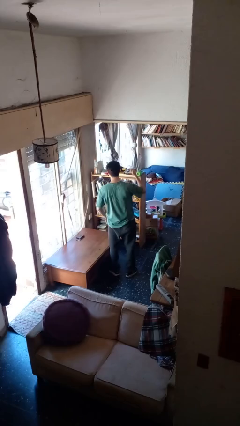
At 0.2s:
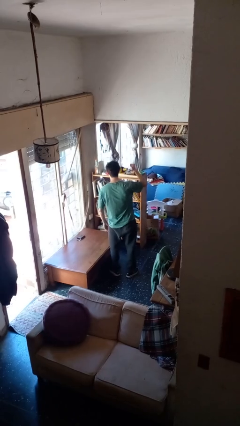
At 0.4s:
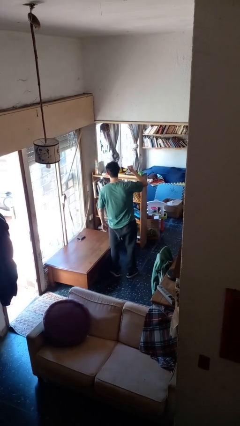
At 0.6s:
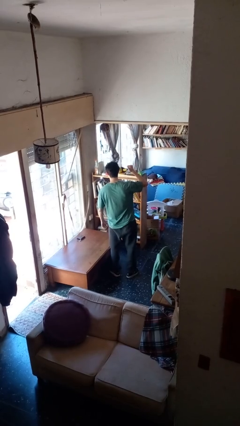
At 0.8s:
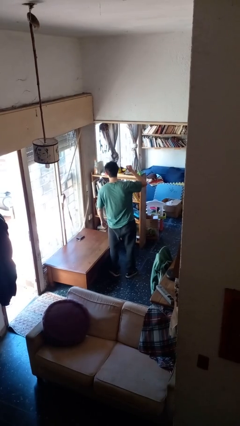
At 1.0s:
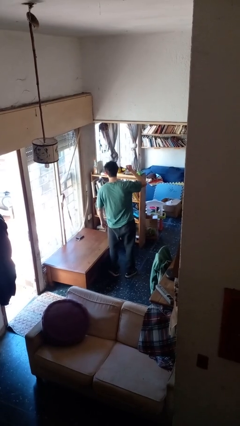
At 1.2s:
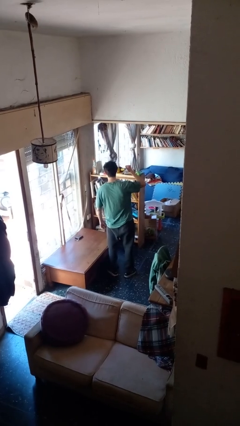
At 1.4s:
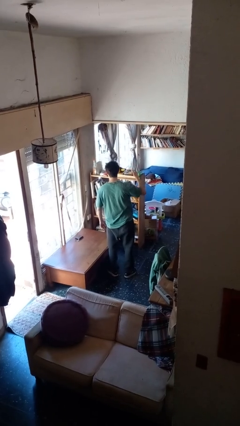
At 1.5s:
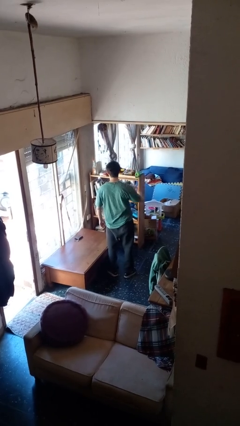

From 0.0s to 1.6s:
person gestures behind me

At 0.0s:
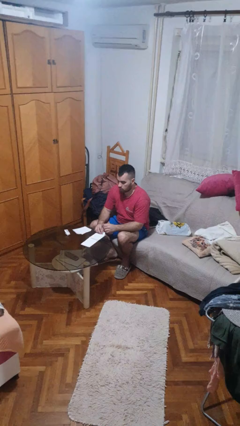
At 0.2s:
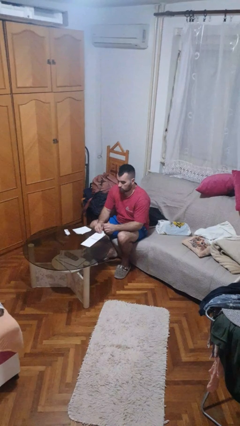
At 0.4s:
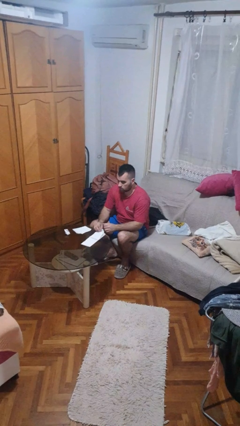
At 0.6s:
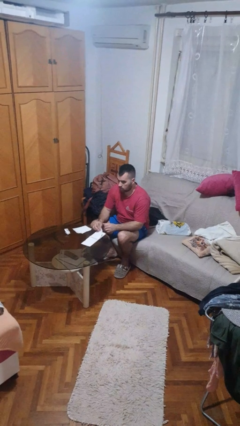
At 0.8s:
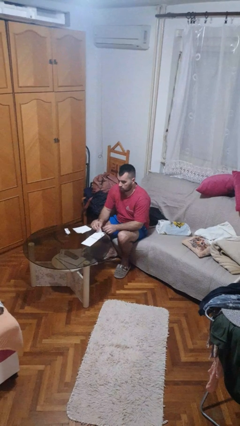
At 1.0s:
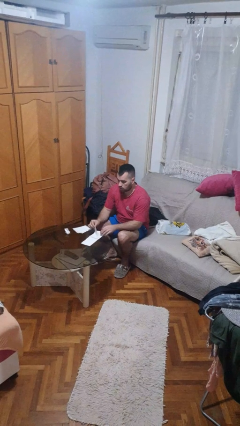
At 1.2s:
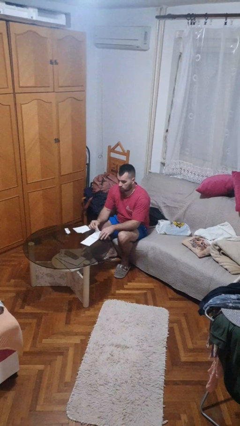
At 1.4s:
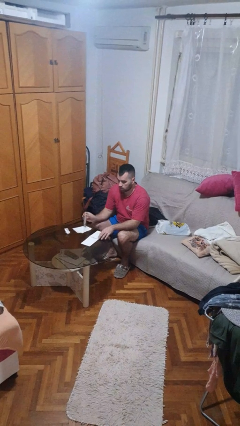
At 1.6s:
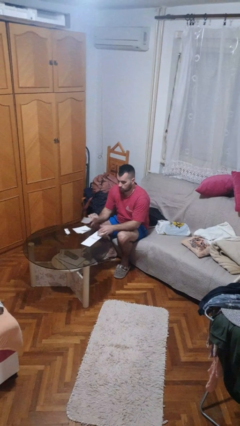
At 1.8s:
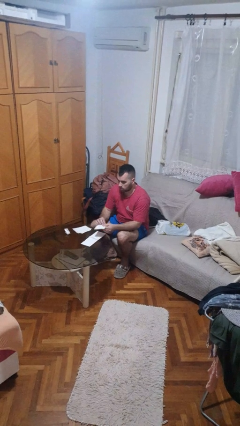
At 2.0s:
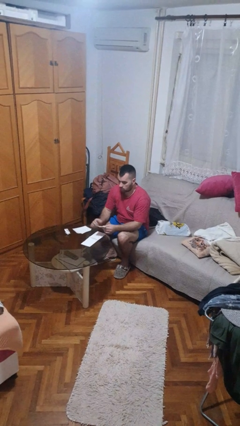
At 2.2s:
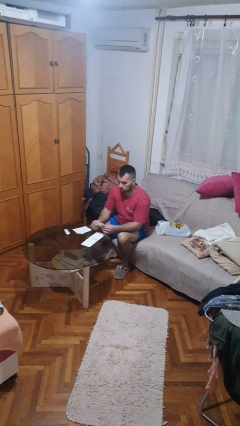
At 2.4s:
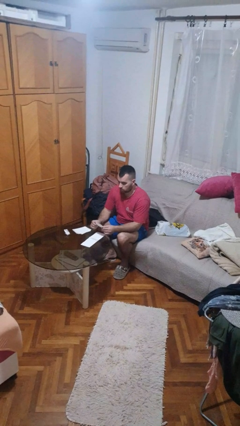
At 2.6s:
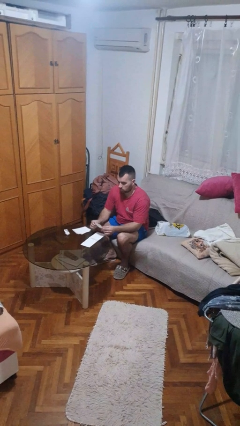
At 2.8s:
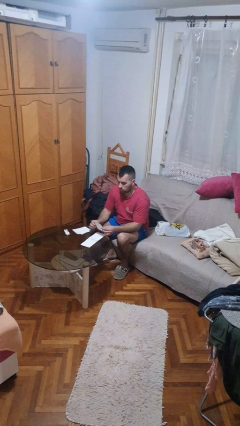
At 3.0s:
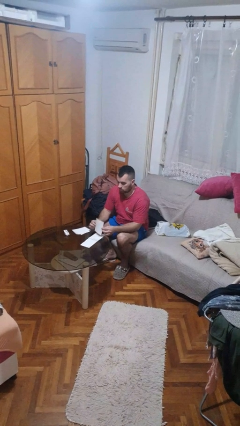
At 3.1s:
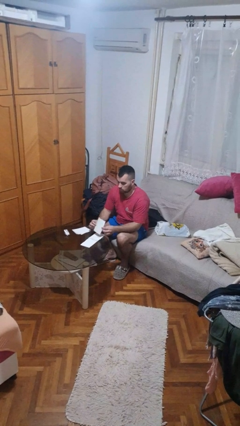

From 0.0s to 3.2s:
person tears paper

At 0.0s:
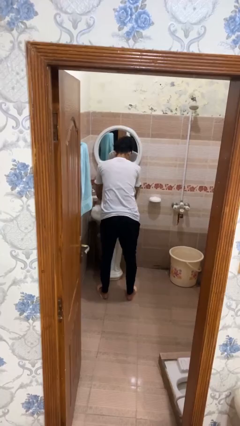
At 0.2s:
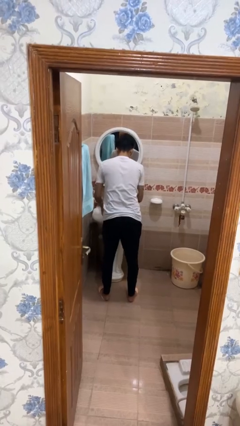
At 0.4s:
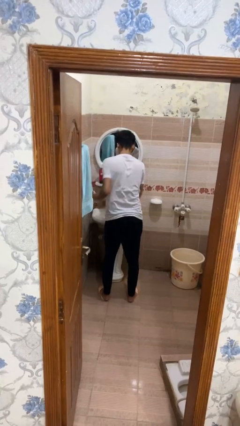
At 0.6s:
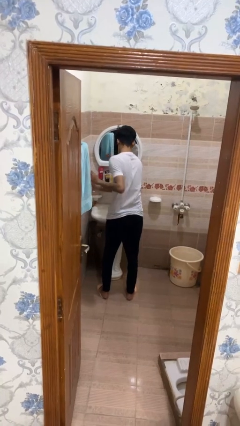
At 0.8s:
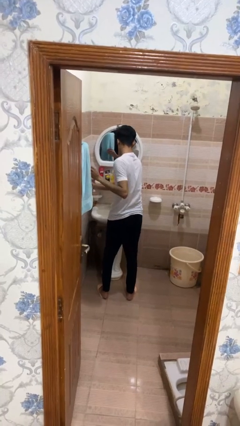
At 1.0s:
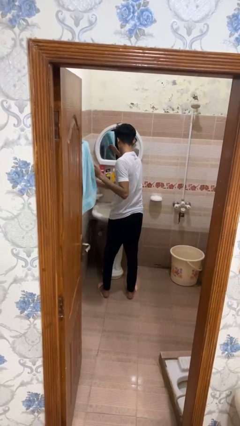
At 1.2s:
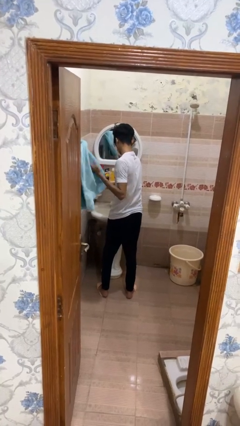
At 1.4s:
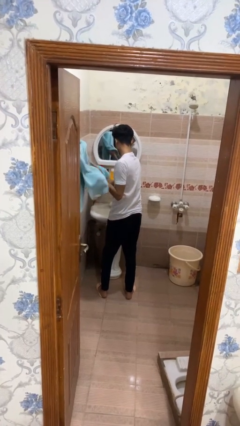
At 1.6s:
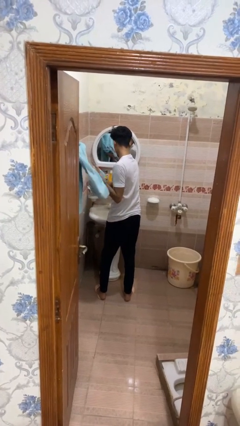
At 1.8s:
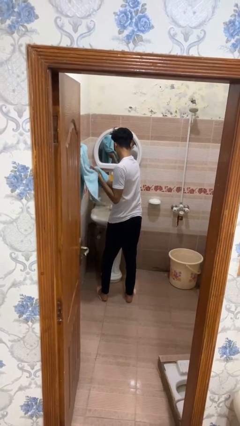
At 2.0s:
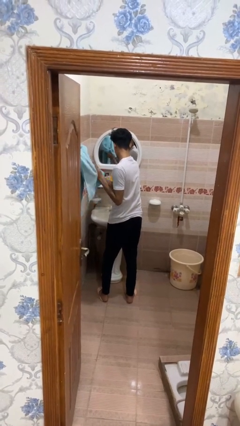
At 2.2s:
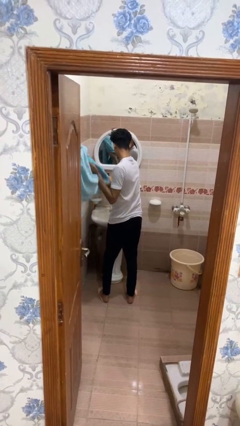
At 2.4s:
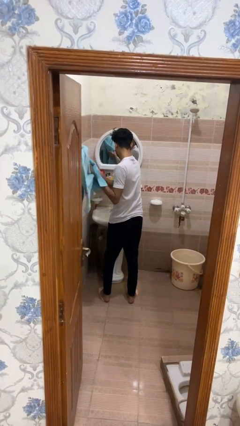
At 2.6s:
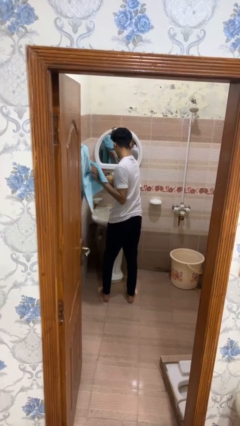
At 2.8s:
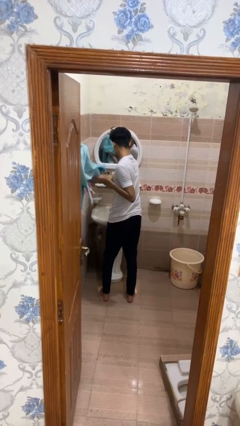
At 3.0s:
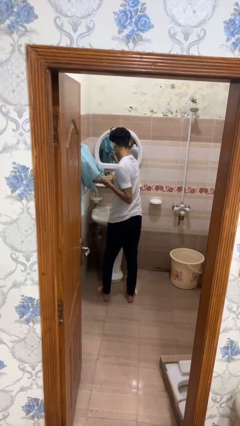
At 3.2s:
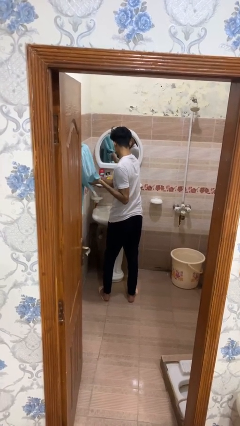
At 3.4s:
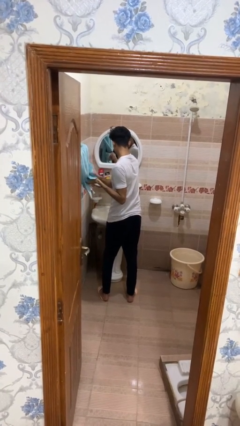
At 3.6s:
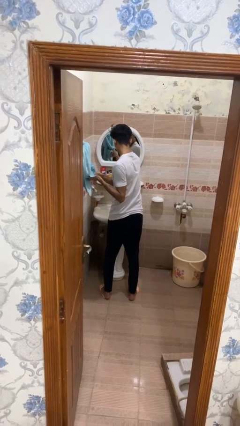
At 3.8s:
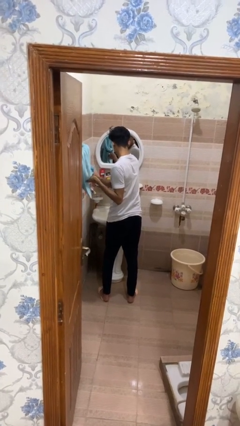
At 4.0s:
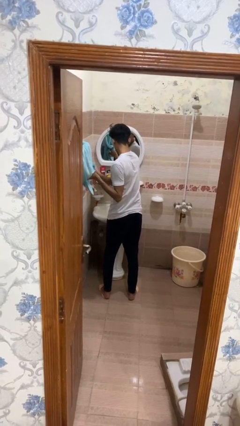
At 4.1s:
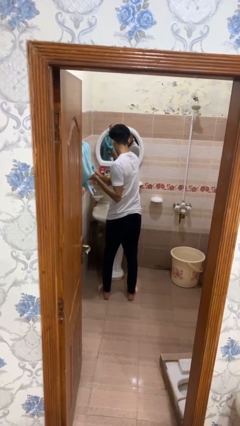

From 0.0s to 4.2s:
person dries hands with towel

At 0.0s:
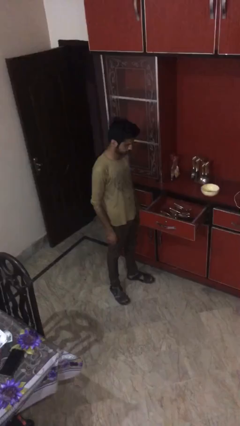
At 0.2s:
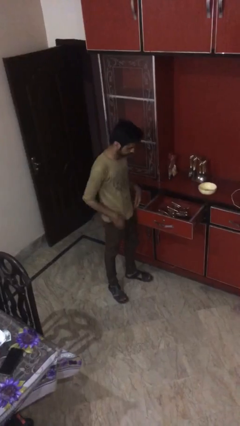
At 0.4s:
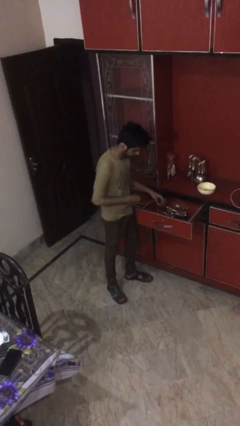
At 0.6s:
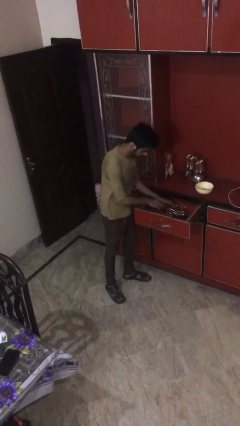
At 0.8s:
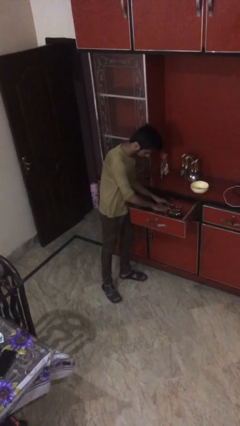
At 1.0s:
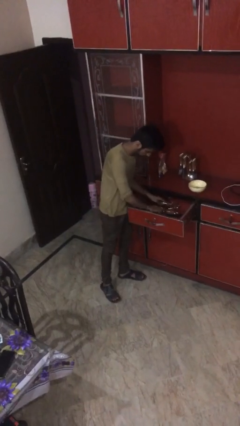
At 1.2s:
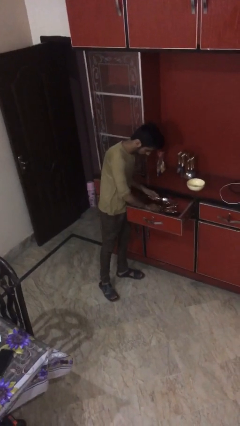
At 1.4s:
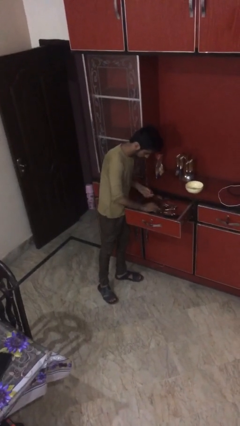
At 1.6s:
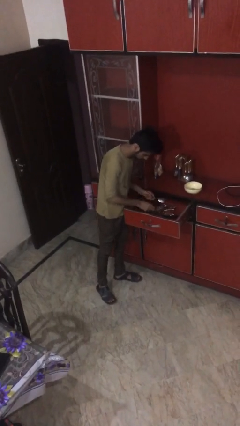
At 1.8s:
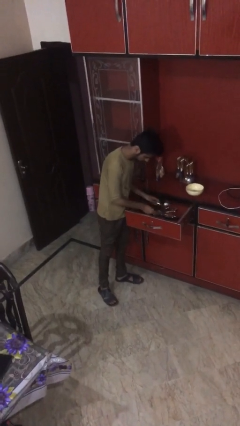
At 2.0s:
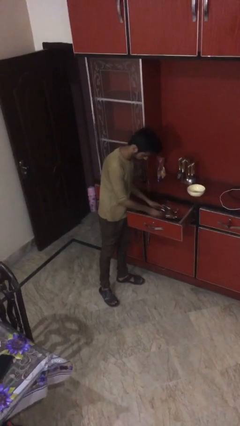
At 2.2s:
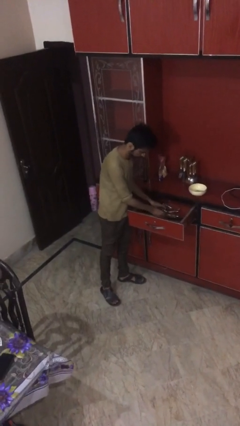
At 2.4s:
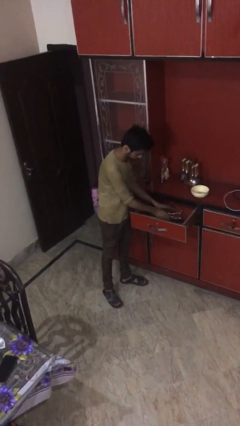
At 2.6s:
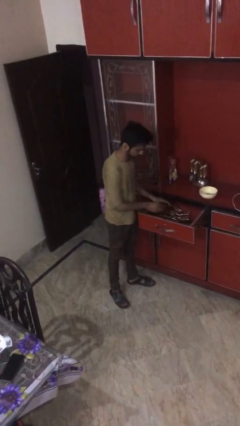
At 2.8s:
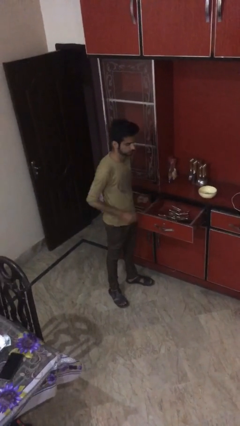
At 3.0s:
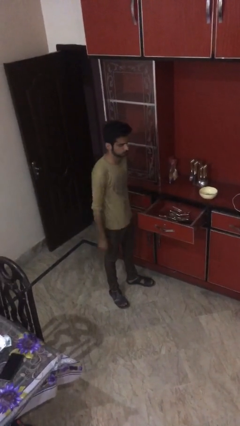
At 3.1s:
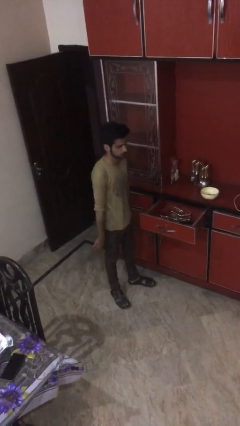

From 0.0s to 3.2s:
person searches in kitchen drawer

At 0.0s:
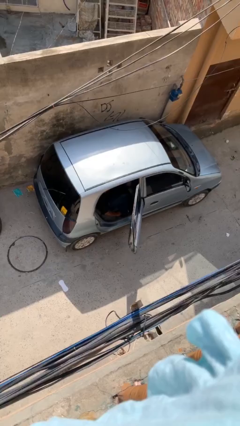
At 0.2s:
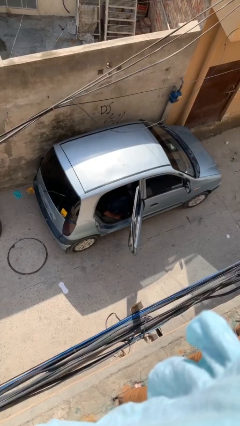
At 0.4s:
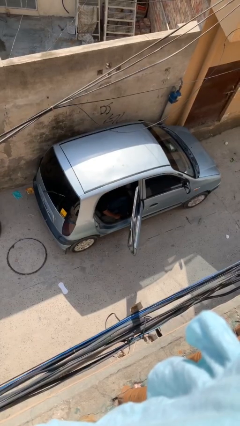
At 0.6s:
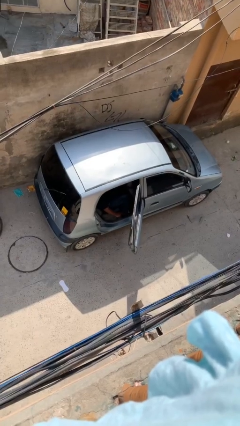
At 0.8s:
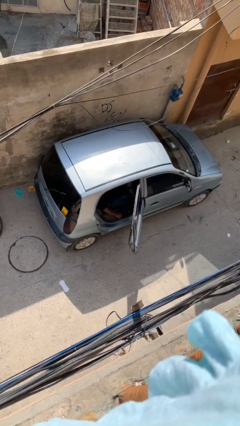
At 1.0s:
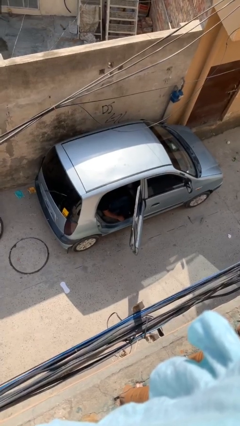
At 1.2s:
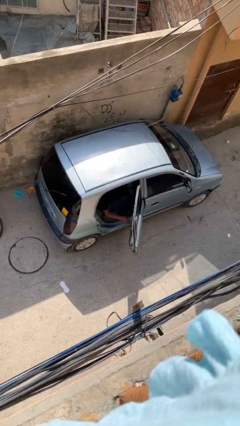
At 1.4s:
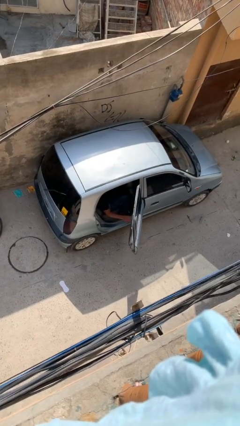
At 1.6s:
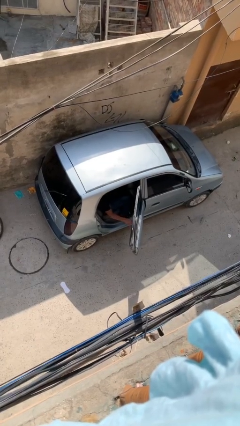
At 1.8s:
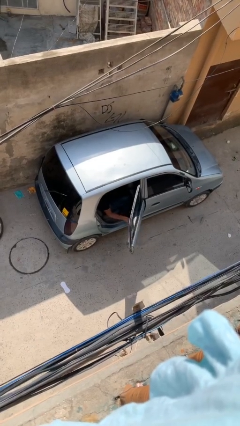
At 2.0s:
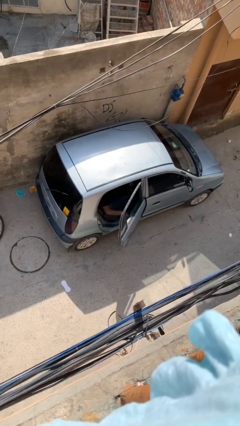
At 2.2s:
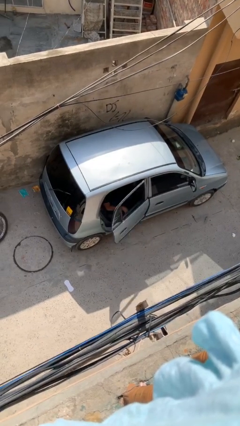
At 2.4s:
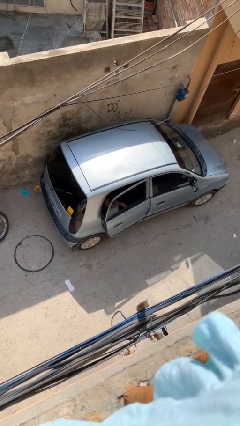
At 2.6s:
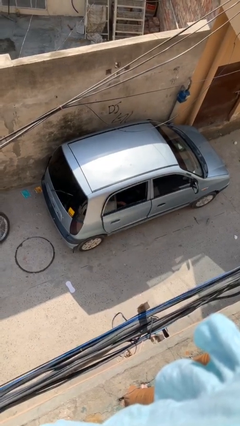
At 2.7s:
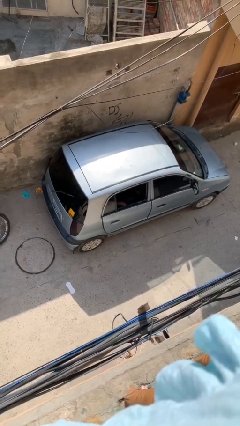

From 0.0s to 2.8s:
person closes car door

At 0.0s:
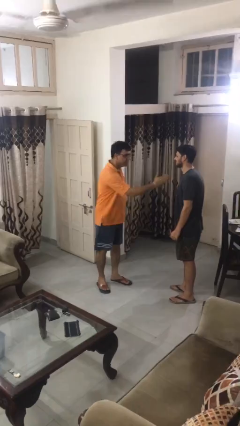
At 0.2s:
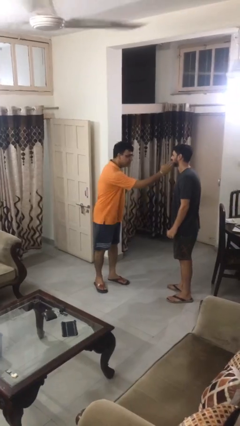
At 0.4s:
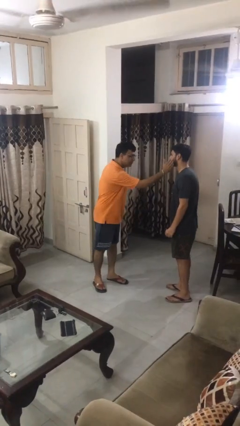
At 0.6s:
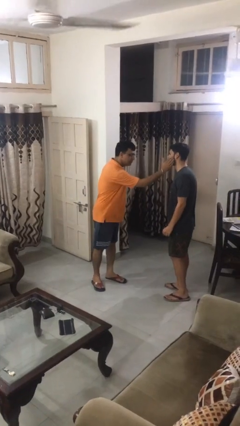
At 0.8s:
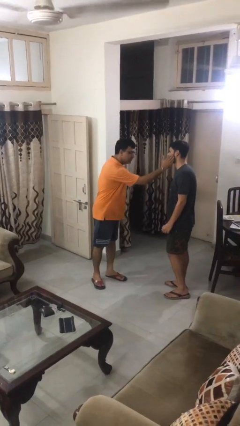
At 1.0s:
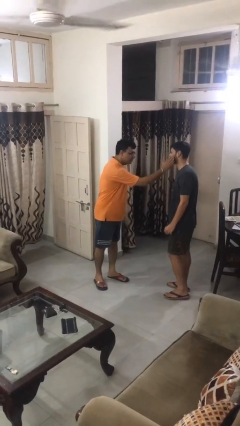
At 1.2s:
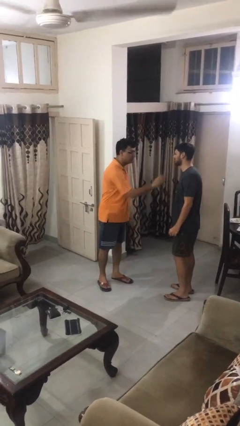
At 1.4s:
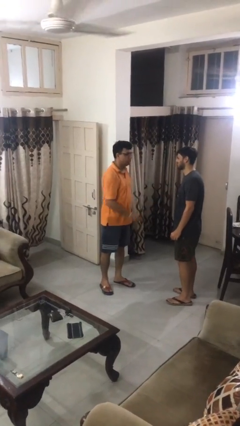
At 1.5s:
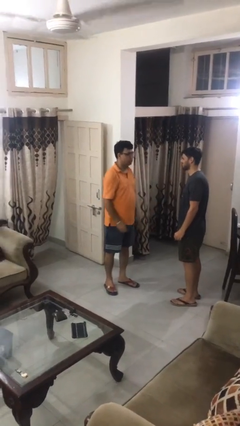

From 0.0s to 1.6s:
person touches face of person

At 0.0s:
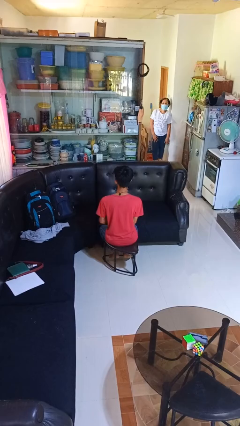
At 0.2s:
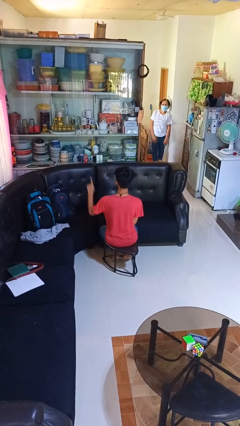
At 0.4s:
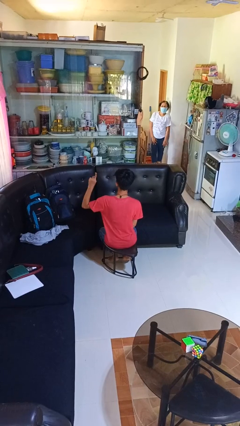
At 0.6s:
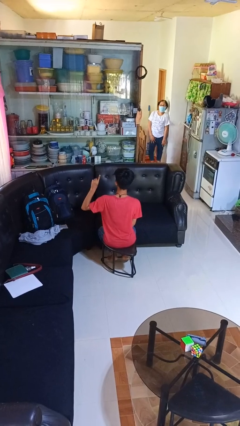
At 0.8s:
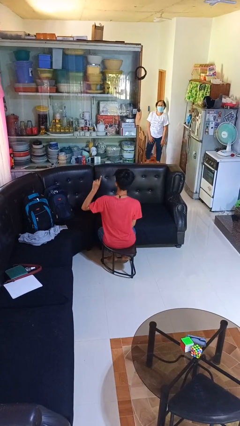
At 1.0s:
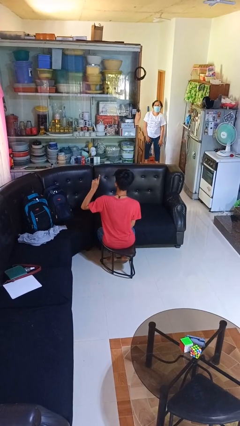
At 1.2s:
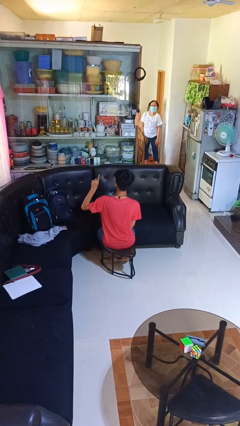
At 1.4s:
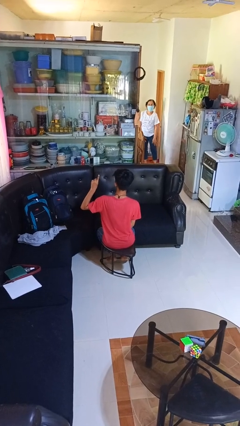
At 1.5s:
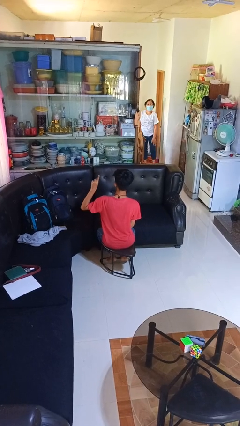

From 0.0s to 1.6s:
person gestures number one
